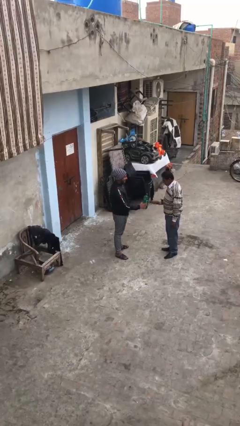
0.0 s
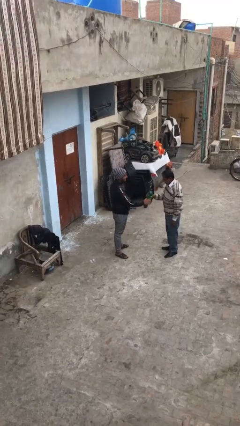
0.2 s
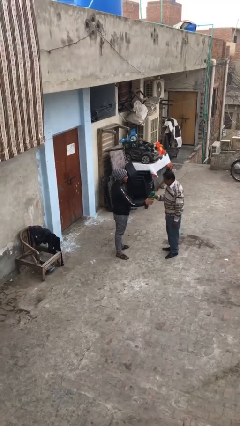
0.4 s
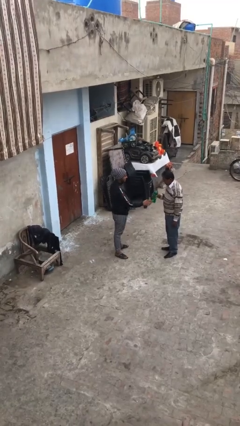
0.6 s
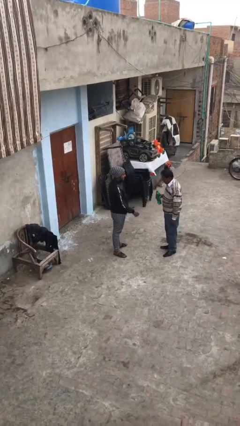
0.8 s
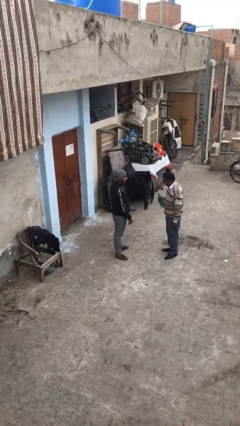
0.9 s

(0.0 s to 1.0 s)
person transfers object to person

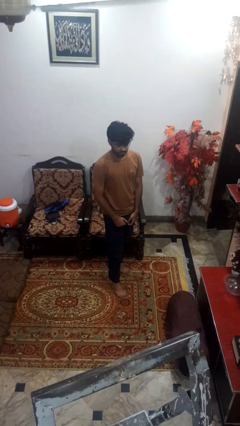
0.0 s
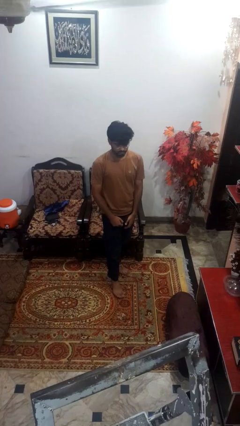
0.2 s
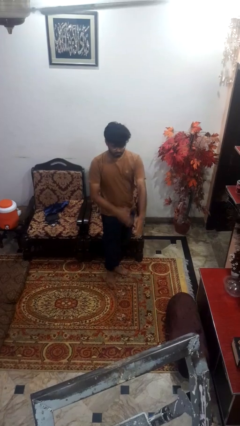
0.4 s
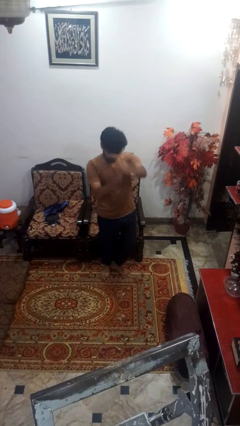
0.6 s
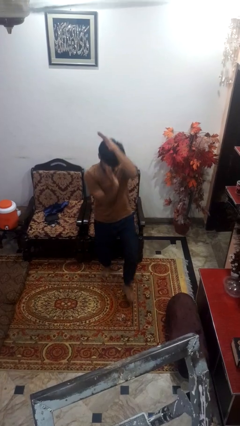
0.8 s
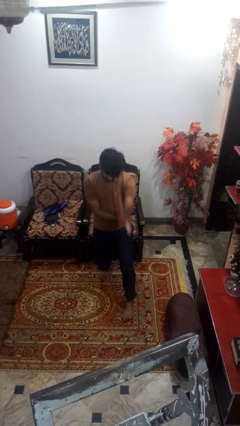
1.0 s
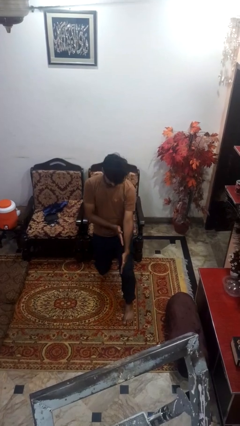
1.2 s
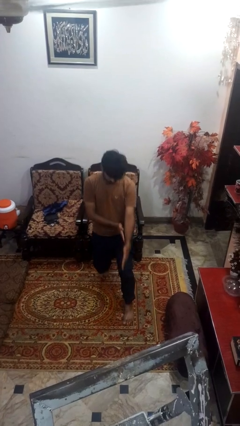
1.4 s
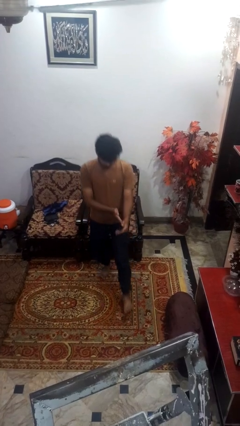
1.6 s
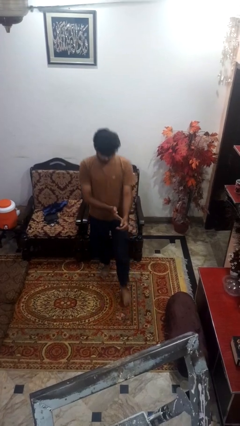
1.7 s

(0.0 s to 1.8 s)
person karate chop

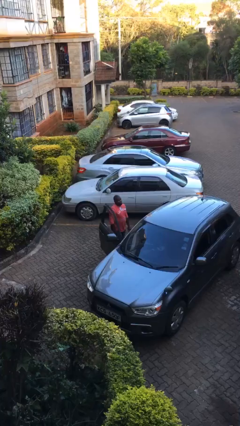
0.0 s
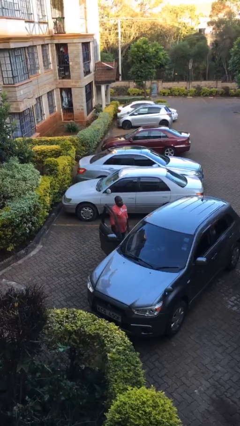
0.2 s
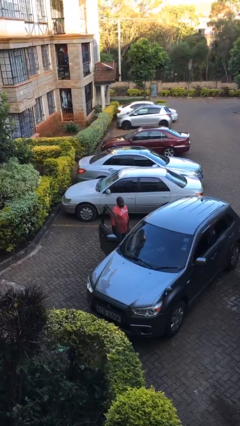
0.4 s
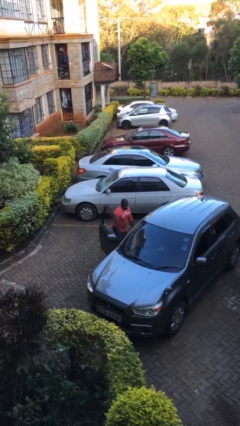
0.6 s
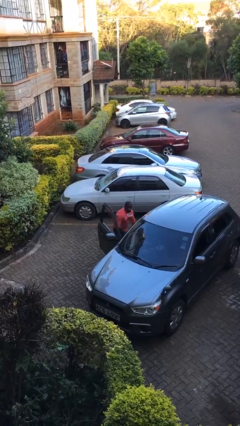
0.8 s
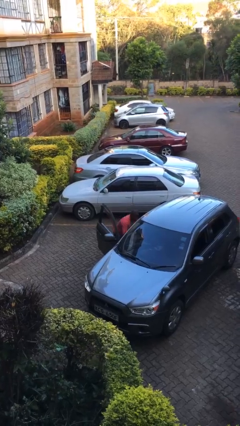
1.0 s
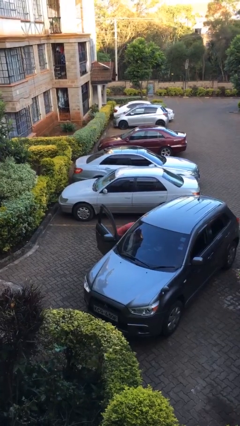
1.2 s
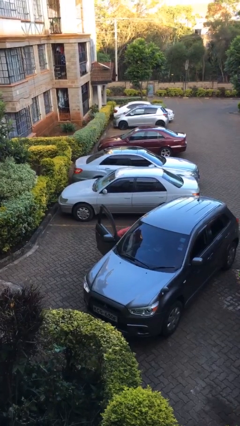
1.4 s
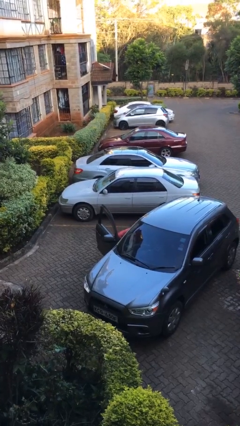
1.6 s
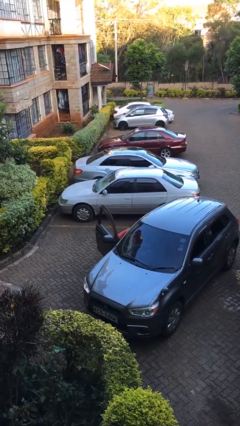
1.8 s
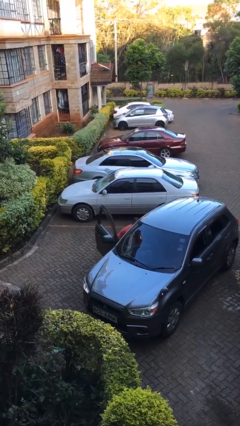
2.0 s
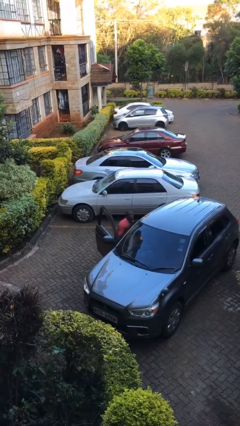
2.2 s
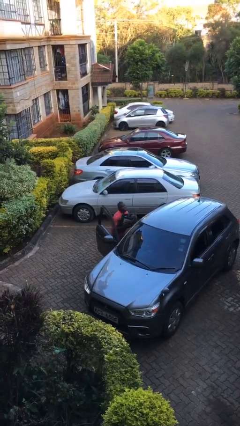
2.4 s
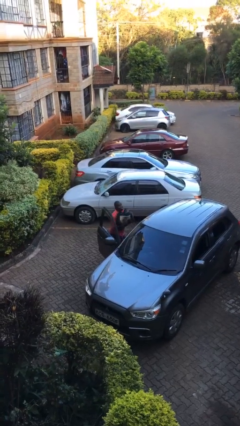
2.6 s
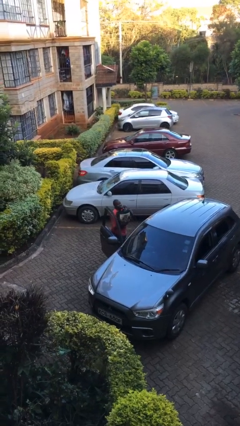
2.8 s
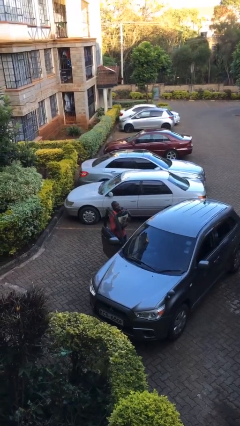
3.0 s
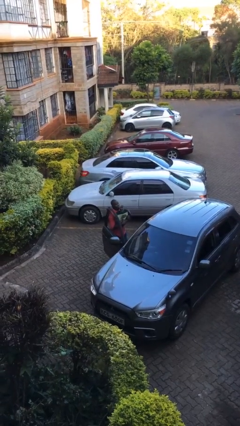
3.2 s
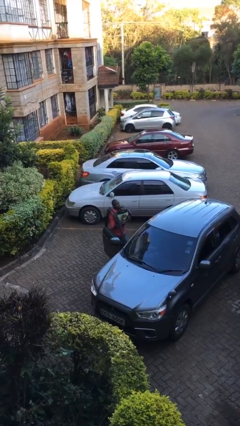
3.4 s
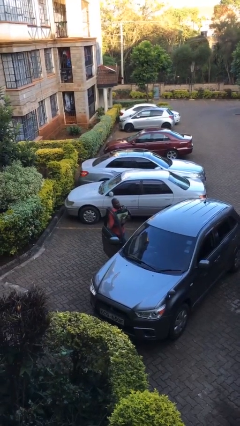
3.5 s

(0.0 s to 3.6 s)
person unloads car

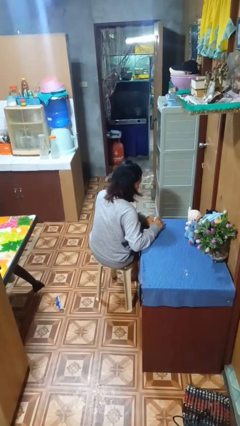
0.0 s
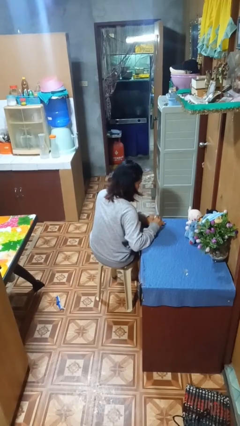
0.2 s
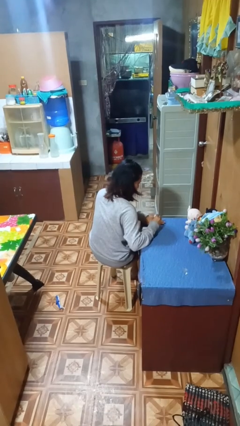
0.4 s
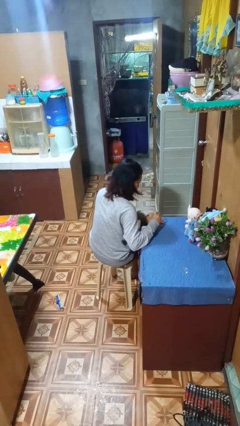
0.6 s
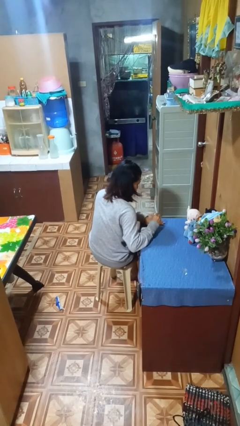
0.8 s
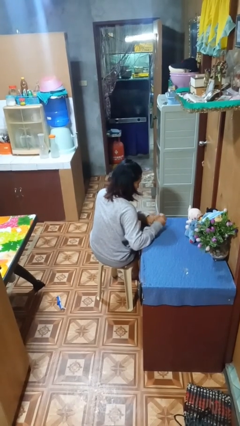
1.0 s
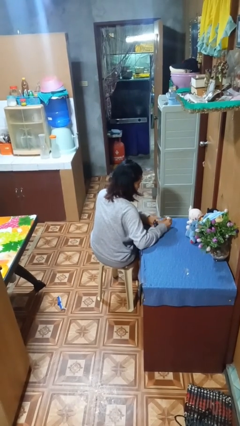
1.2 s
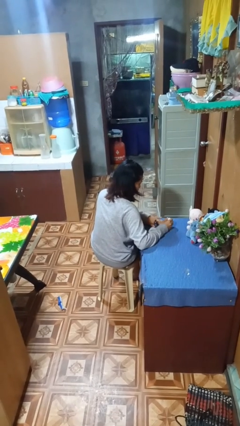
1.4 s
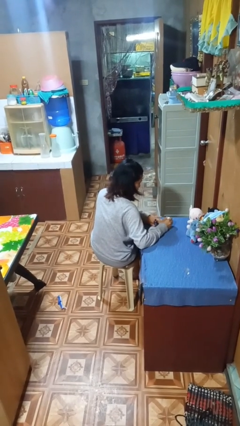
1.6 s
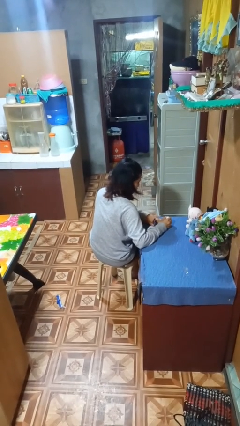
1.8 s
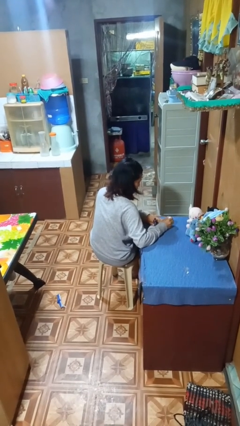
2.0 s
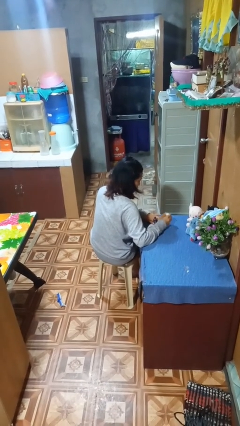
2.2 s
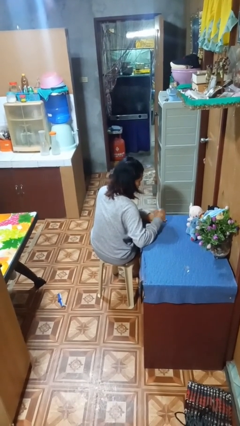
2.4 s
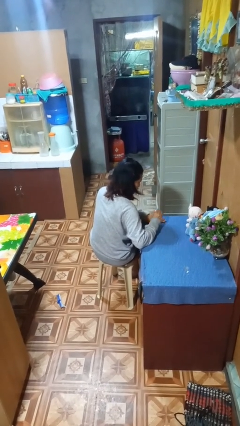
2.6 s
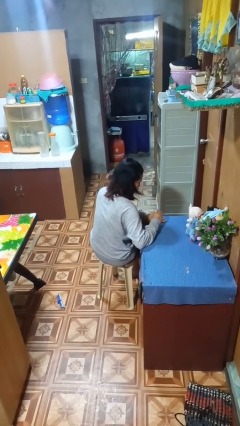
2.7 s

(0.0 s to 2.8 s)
person paints fingernails

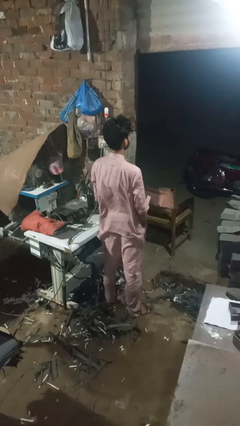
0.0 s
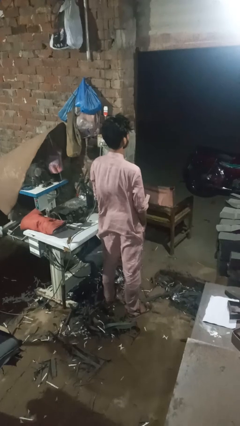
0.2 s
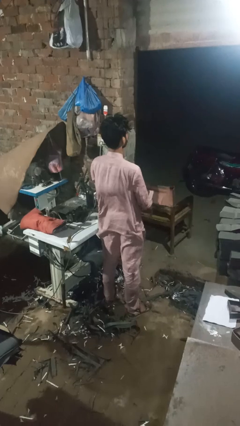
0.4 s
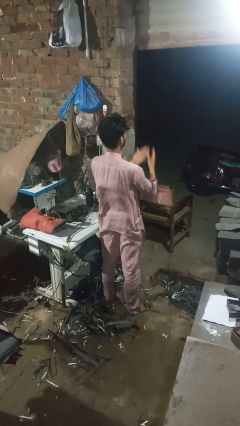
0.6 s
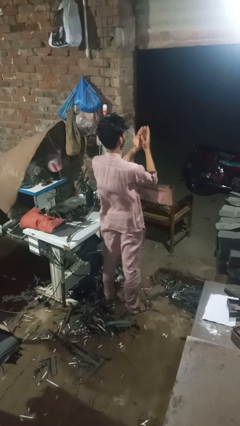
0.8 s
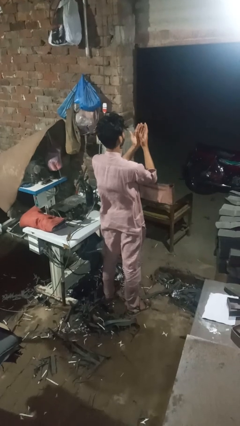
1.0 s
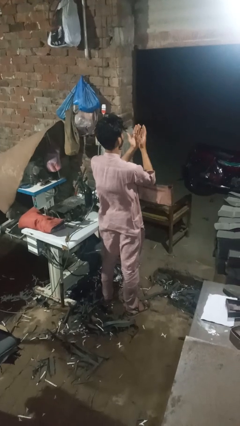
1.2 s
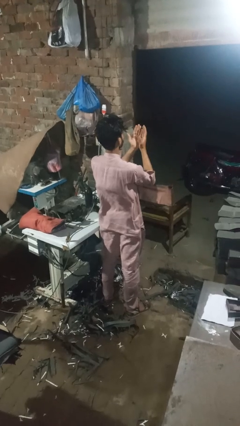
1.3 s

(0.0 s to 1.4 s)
person prays

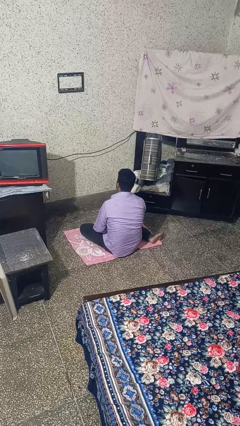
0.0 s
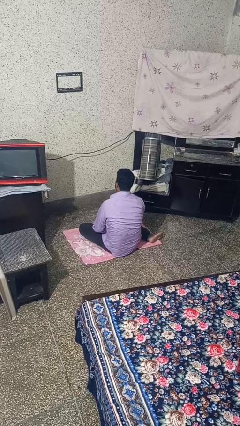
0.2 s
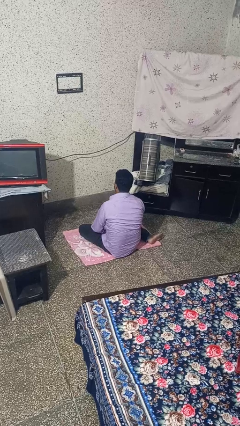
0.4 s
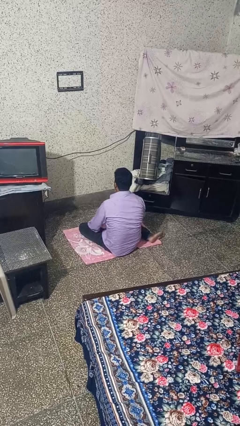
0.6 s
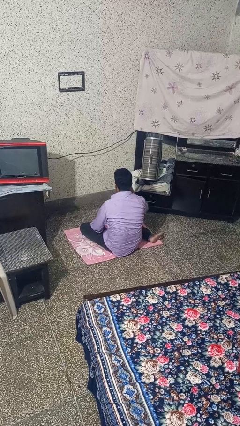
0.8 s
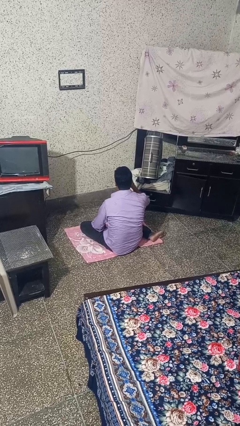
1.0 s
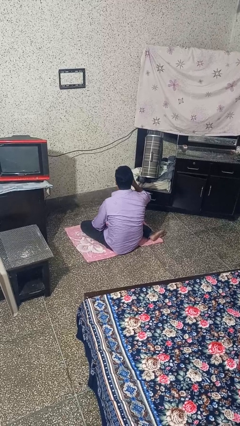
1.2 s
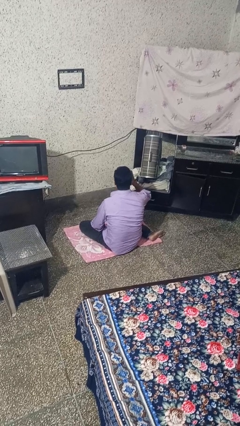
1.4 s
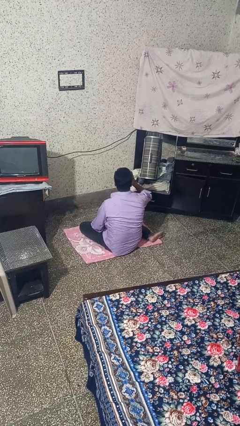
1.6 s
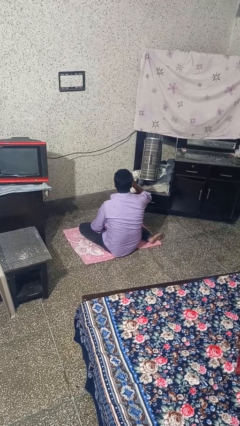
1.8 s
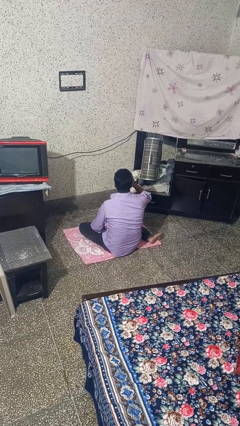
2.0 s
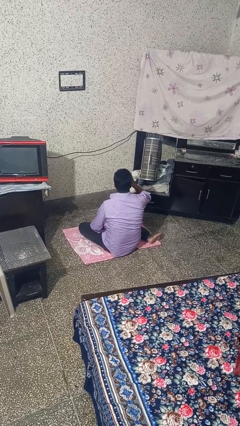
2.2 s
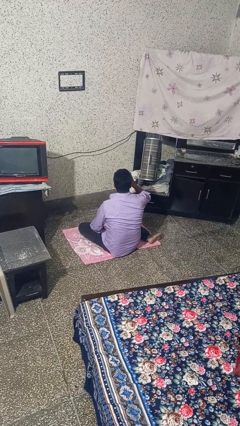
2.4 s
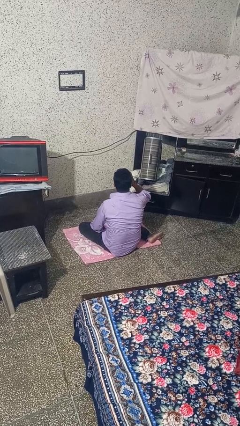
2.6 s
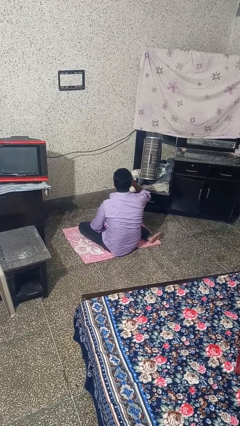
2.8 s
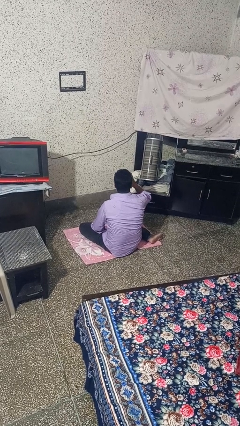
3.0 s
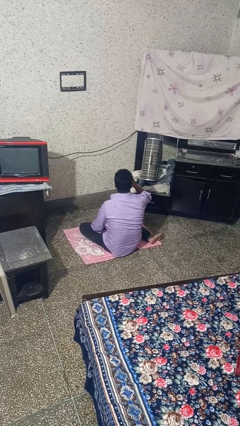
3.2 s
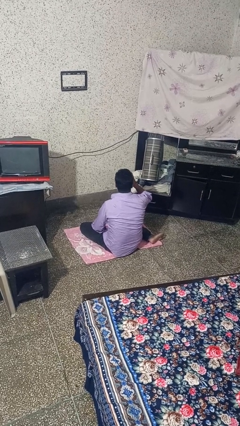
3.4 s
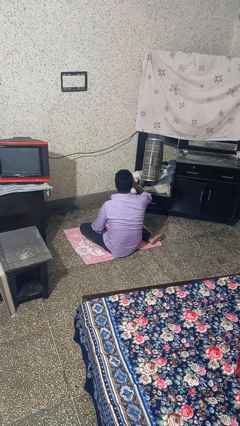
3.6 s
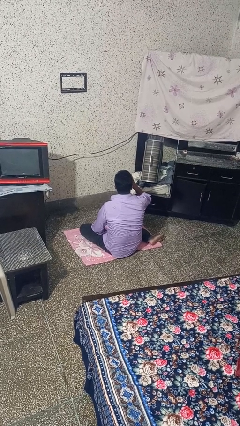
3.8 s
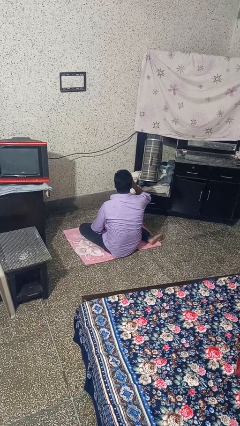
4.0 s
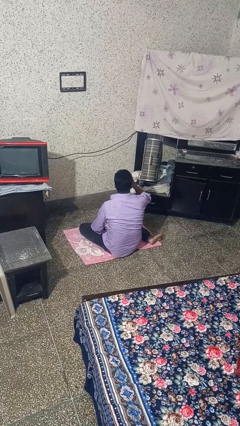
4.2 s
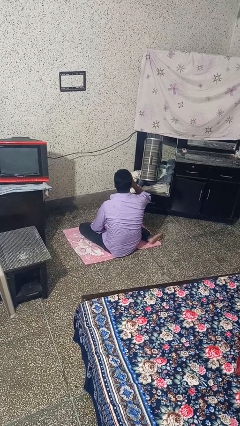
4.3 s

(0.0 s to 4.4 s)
person vapes

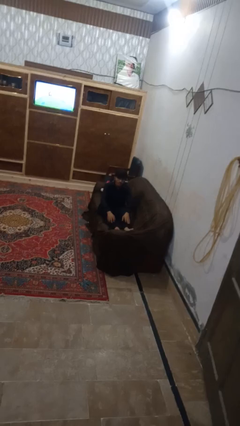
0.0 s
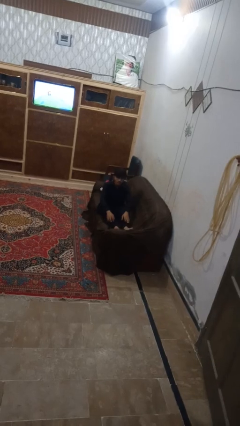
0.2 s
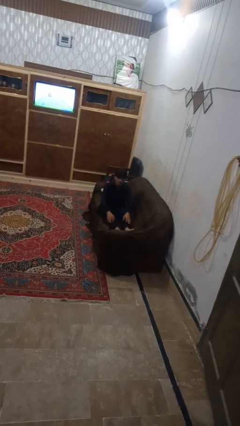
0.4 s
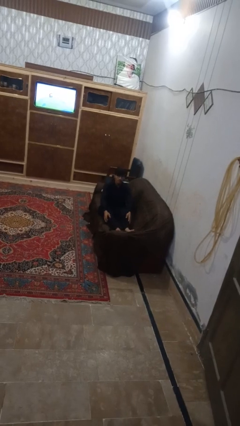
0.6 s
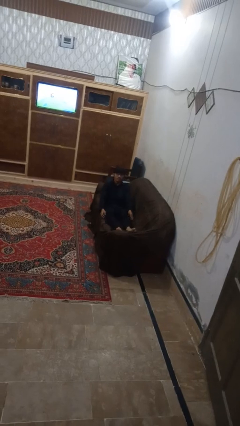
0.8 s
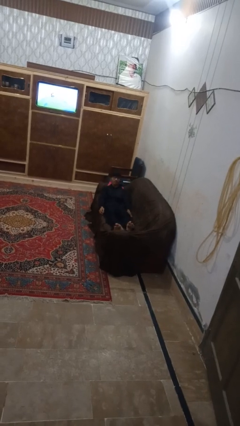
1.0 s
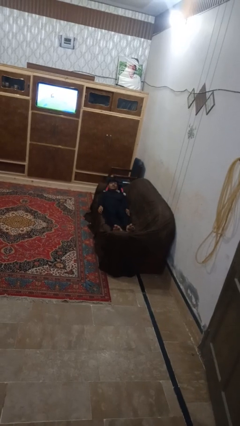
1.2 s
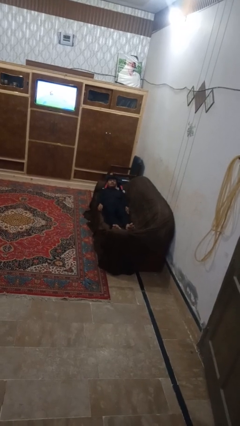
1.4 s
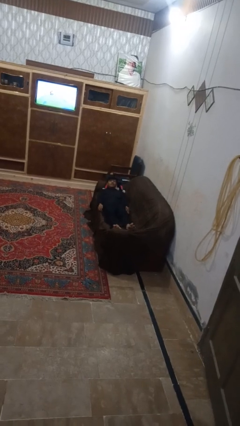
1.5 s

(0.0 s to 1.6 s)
person lies down on couch

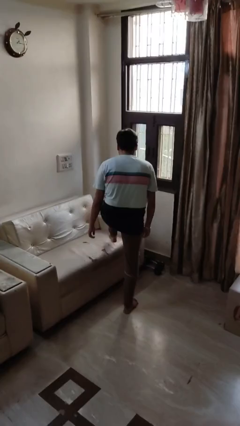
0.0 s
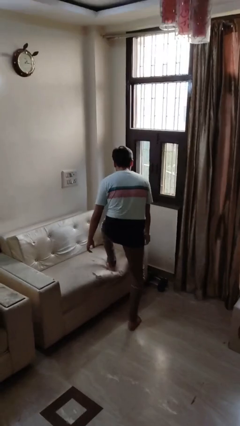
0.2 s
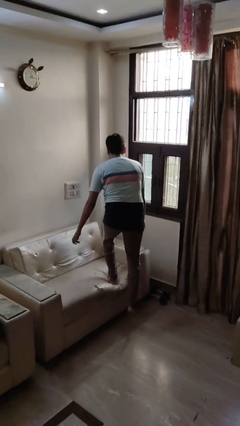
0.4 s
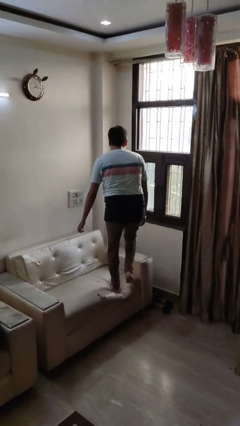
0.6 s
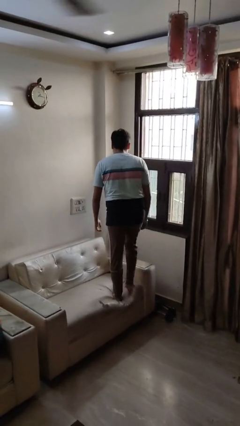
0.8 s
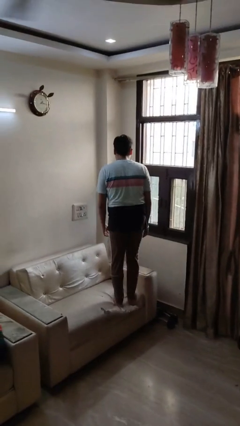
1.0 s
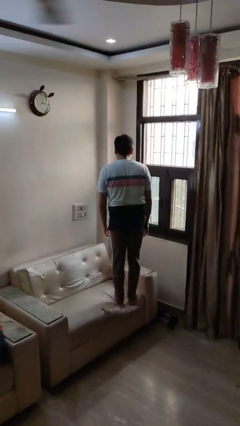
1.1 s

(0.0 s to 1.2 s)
person climbs on couch
